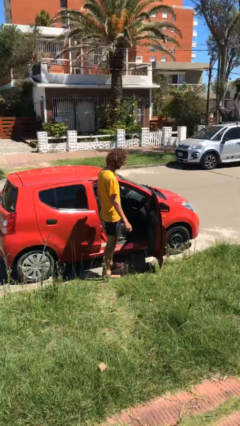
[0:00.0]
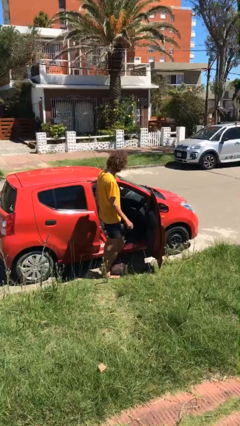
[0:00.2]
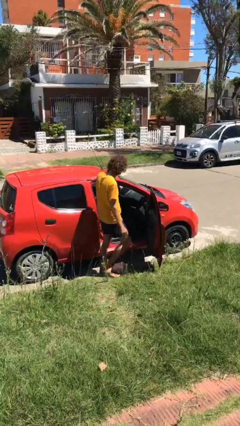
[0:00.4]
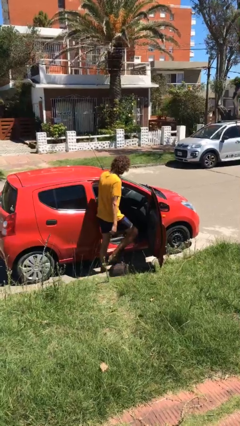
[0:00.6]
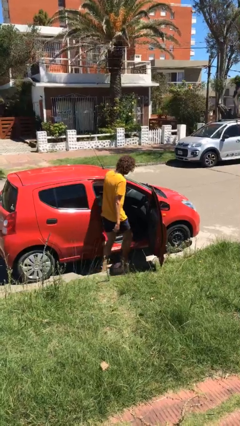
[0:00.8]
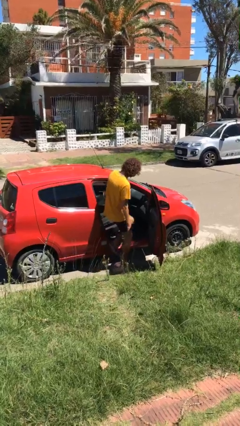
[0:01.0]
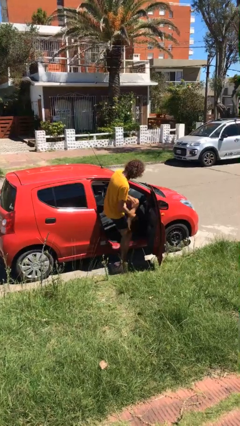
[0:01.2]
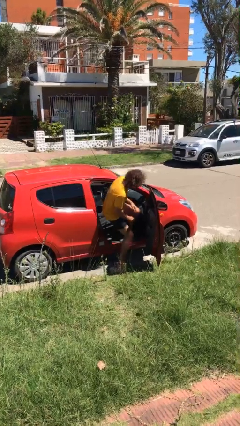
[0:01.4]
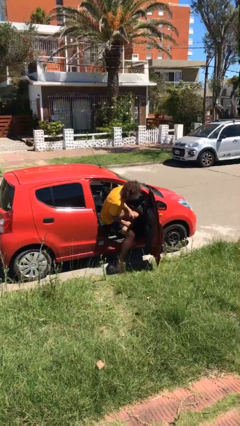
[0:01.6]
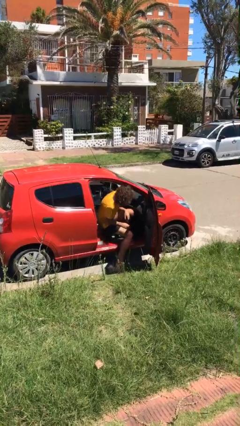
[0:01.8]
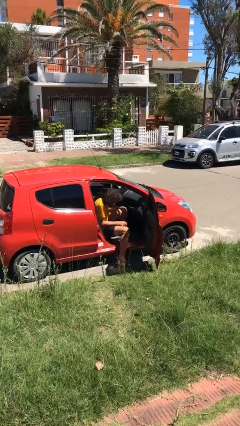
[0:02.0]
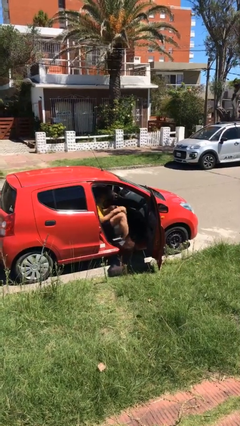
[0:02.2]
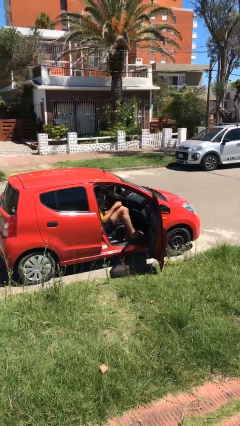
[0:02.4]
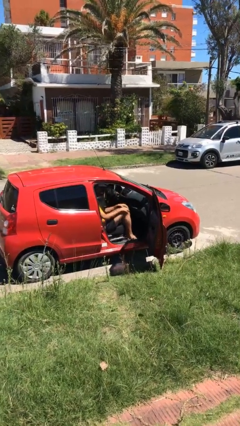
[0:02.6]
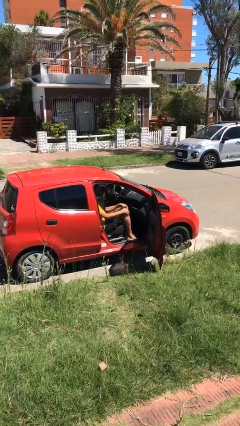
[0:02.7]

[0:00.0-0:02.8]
person enters car

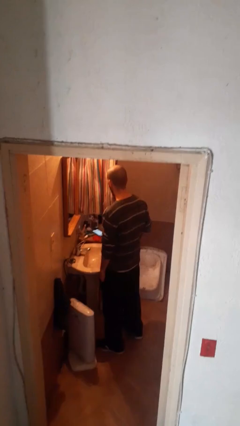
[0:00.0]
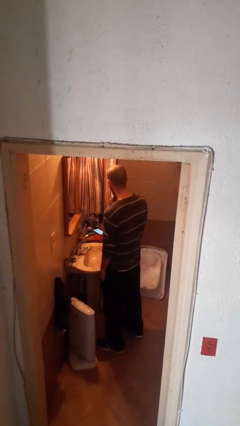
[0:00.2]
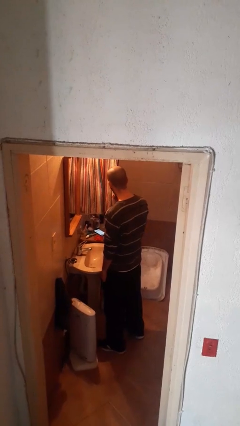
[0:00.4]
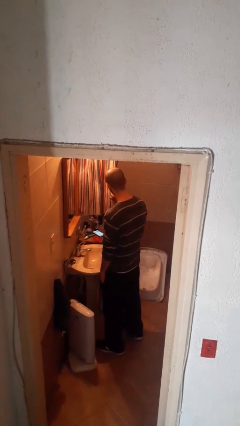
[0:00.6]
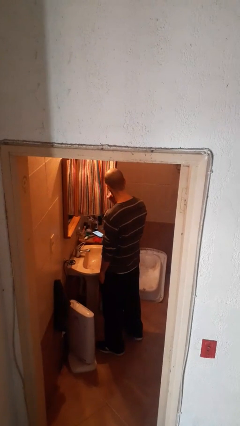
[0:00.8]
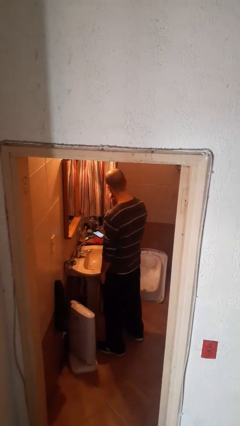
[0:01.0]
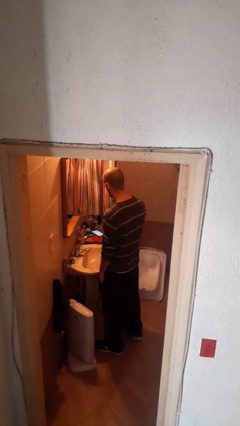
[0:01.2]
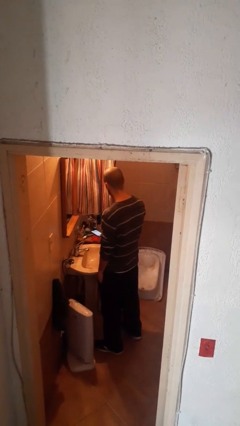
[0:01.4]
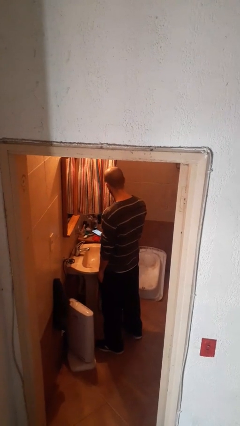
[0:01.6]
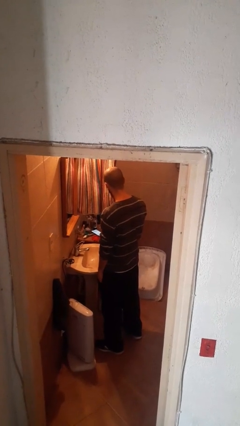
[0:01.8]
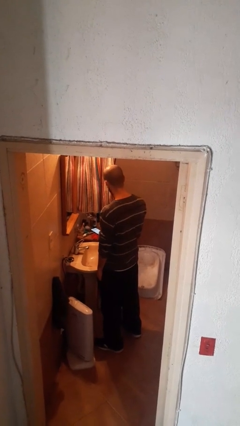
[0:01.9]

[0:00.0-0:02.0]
person brushes teeth

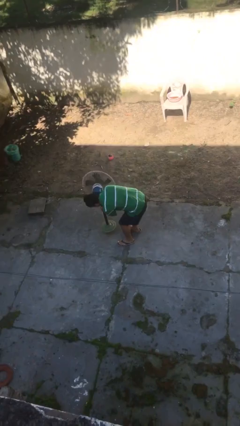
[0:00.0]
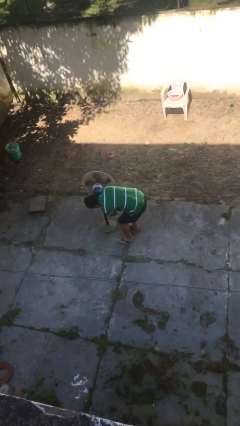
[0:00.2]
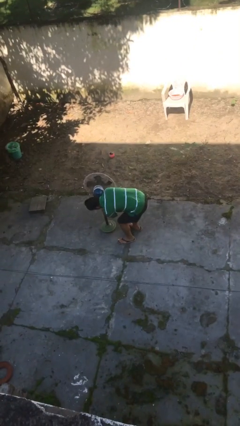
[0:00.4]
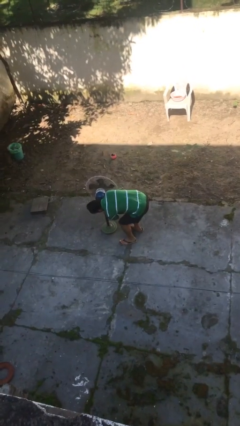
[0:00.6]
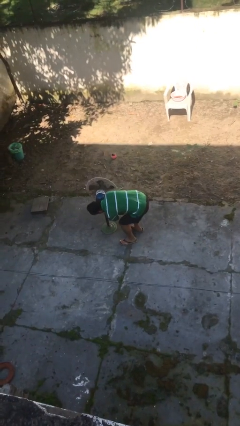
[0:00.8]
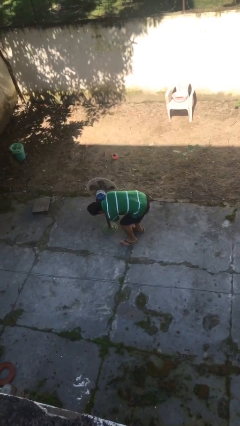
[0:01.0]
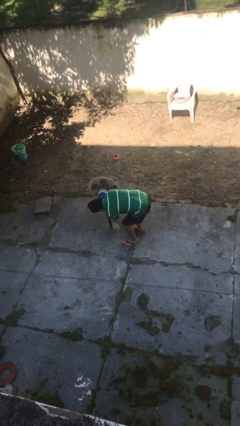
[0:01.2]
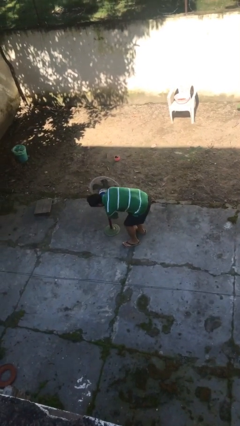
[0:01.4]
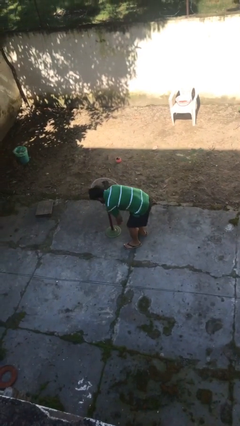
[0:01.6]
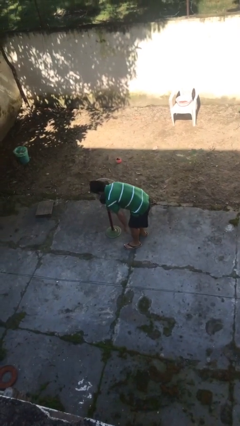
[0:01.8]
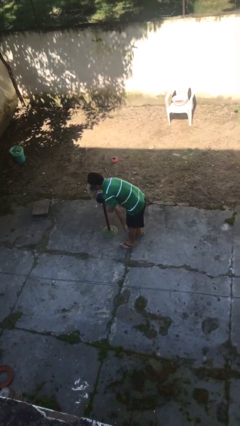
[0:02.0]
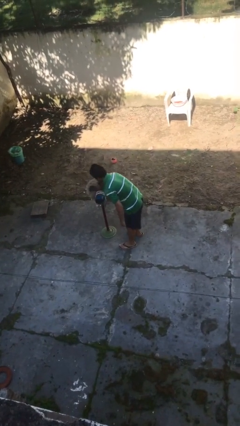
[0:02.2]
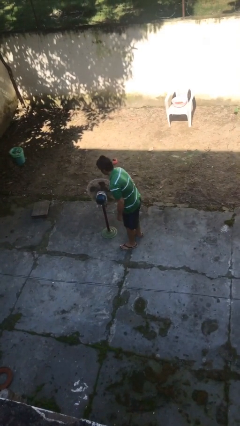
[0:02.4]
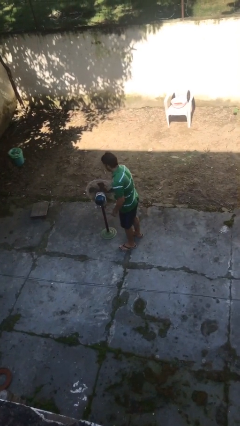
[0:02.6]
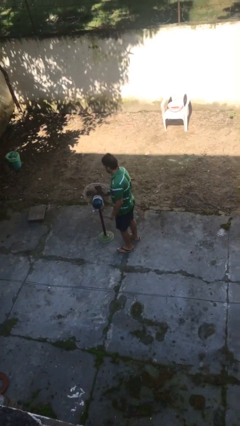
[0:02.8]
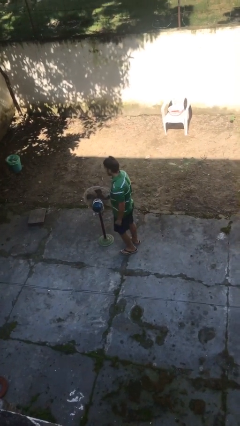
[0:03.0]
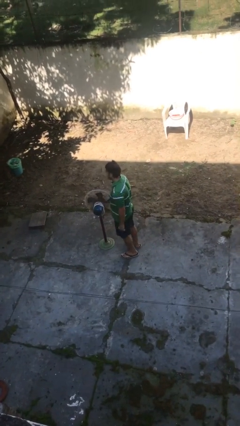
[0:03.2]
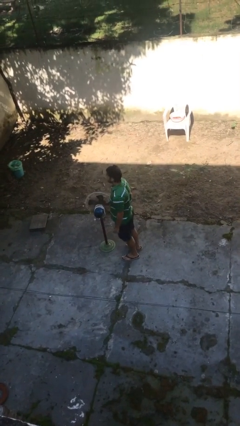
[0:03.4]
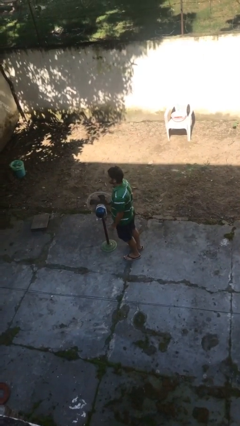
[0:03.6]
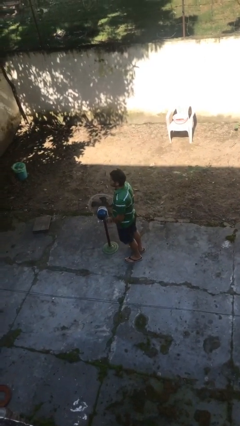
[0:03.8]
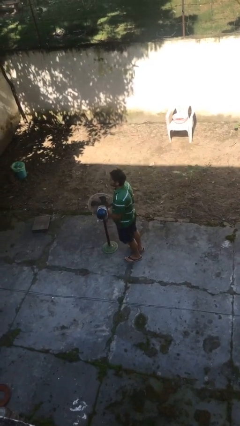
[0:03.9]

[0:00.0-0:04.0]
person puts down object on floor

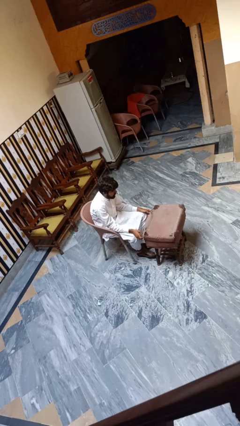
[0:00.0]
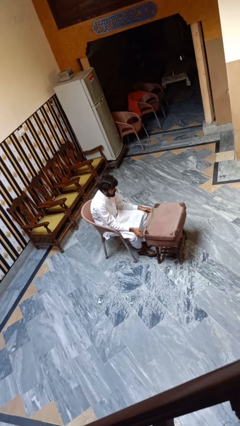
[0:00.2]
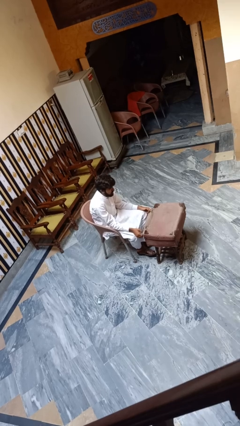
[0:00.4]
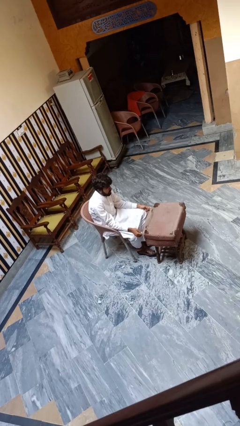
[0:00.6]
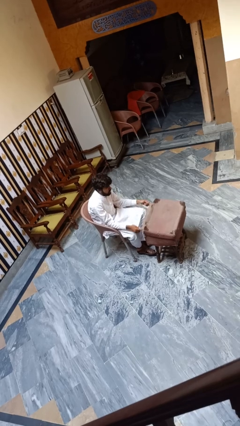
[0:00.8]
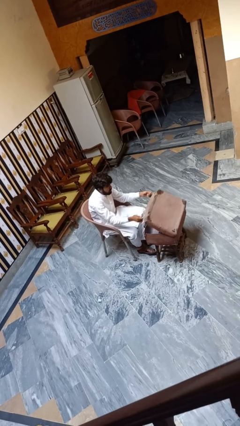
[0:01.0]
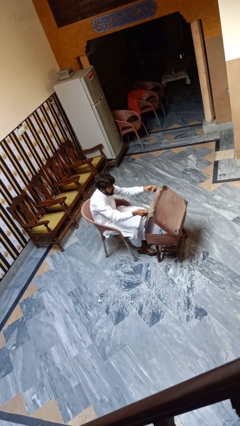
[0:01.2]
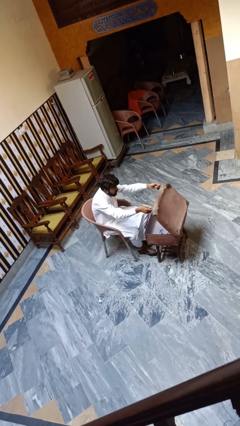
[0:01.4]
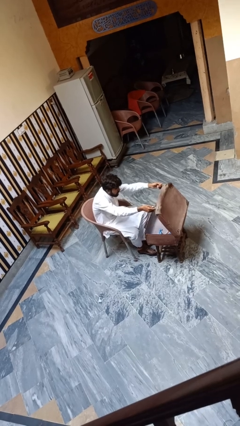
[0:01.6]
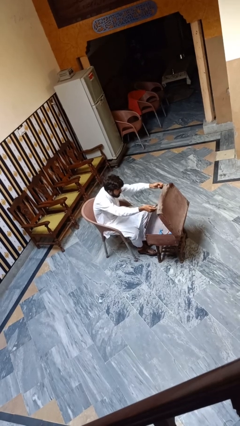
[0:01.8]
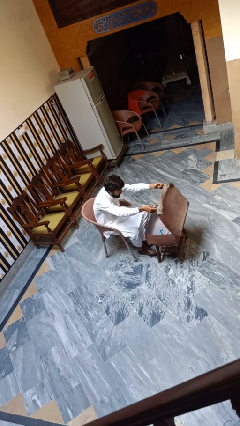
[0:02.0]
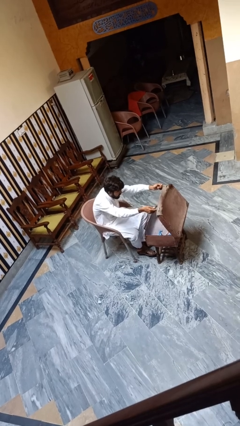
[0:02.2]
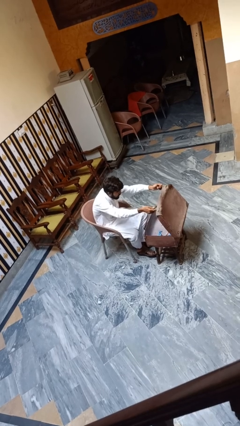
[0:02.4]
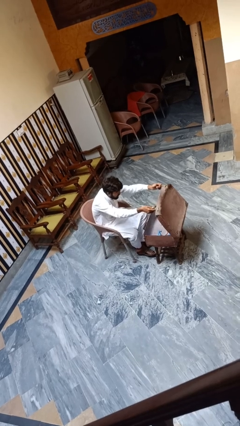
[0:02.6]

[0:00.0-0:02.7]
person opens suitcase

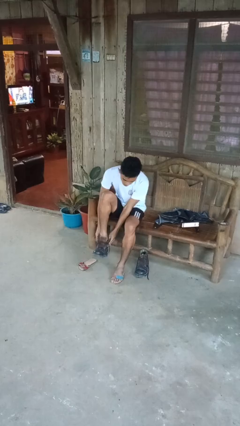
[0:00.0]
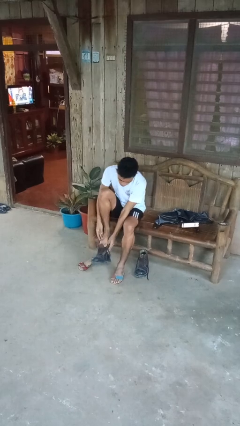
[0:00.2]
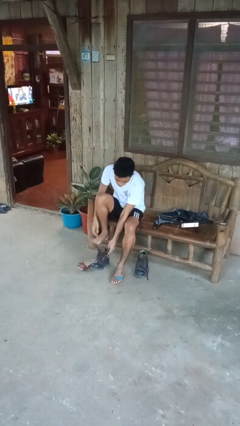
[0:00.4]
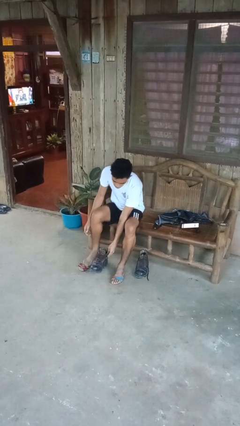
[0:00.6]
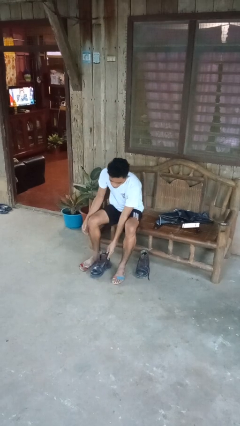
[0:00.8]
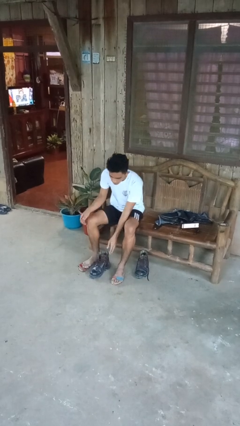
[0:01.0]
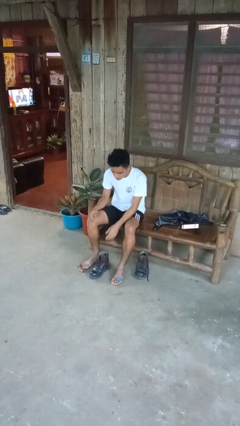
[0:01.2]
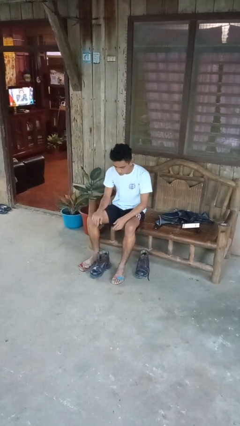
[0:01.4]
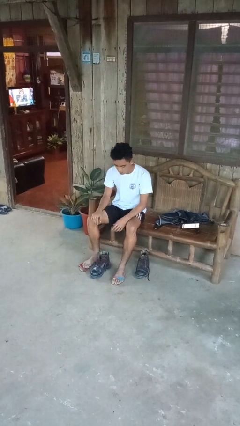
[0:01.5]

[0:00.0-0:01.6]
person takes off boots

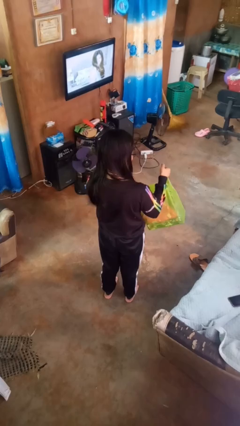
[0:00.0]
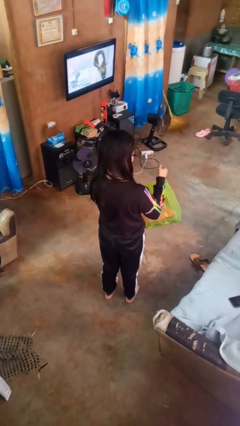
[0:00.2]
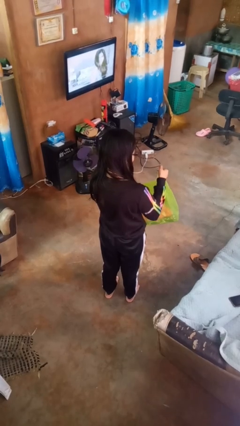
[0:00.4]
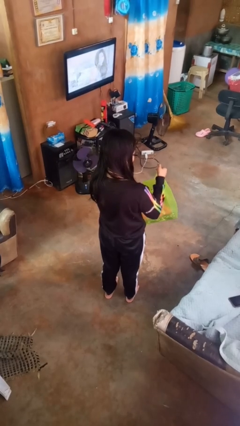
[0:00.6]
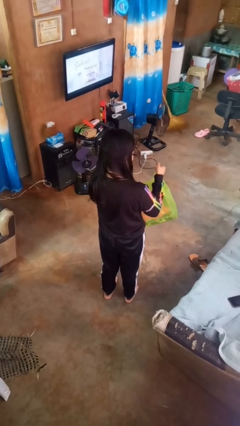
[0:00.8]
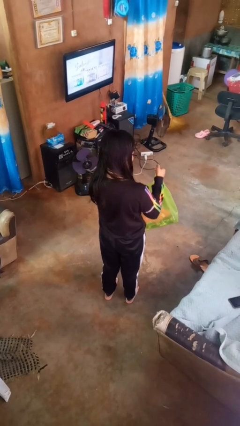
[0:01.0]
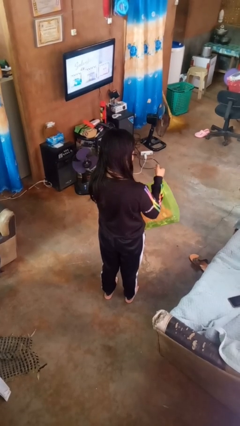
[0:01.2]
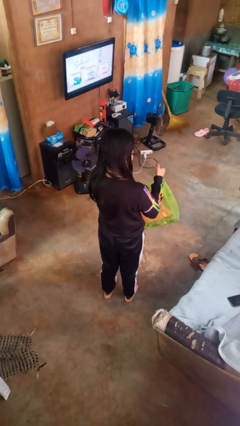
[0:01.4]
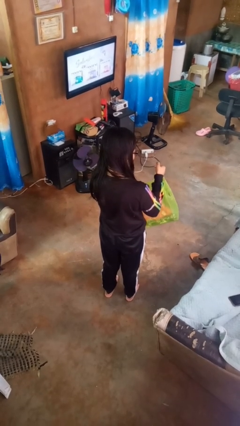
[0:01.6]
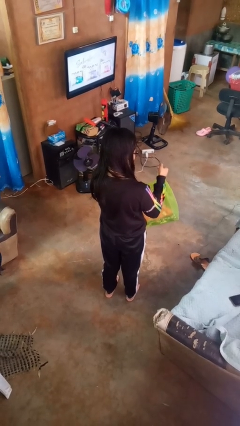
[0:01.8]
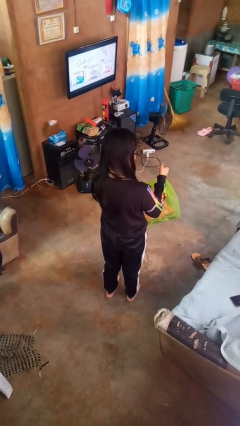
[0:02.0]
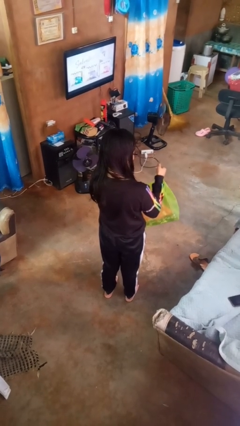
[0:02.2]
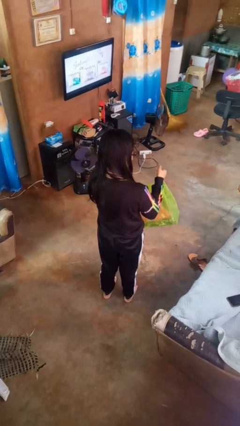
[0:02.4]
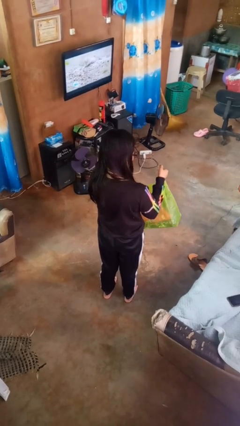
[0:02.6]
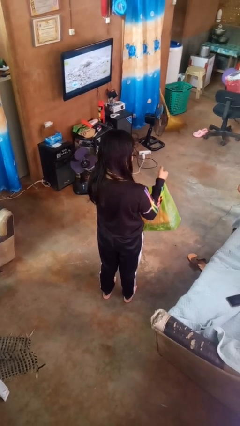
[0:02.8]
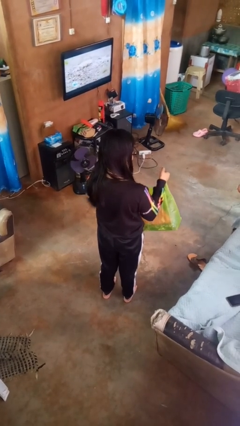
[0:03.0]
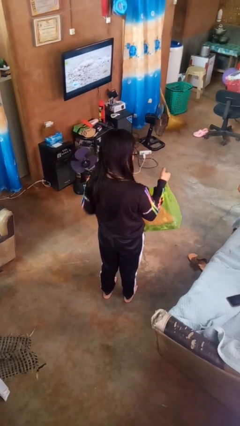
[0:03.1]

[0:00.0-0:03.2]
person searches in bag

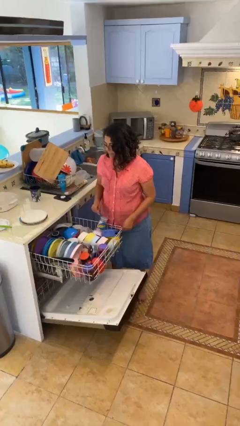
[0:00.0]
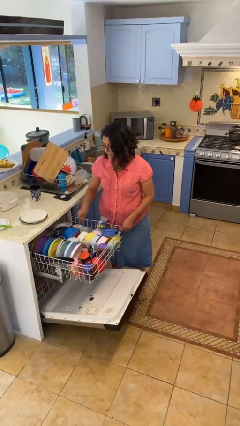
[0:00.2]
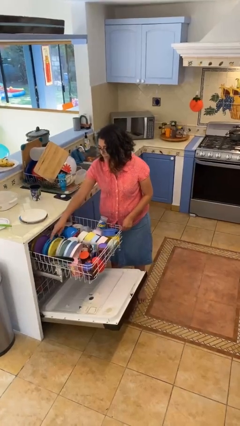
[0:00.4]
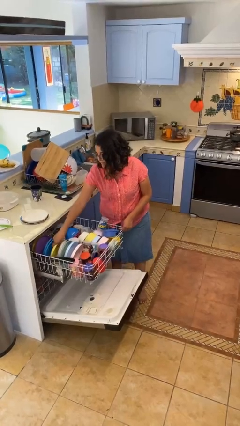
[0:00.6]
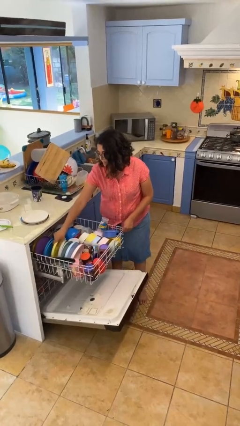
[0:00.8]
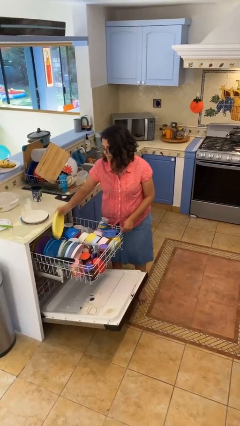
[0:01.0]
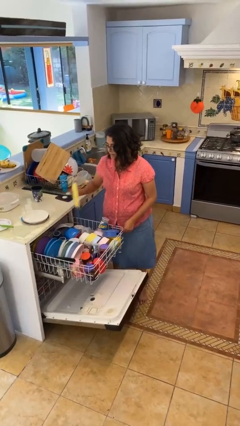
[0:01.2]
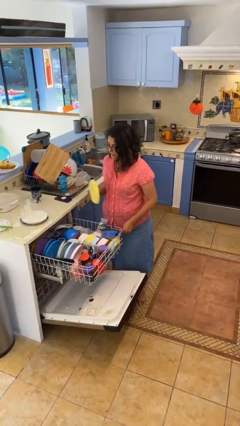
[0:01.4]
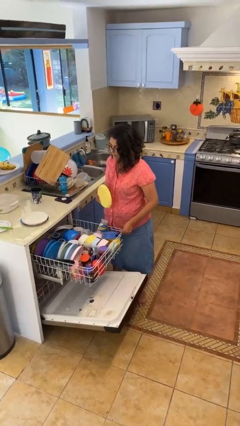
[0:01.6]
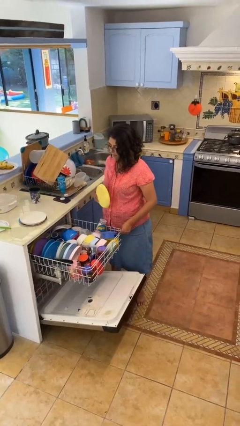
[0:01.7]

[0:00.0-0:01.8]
person unloads dishwasher
